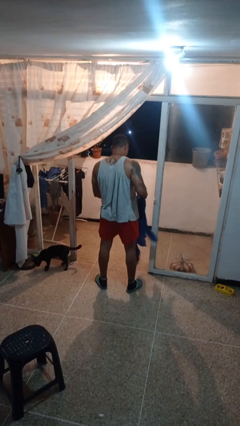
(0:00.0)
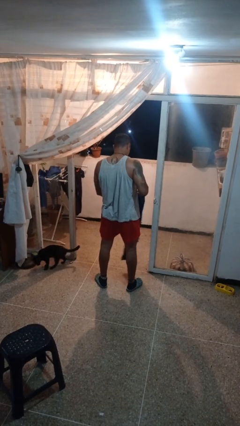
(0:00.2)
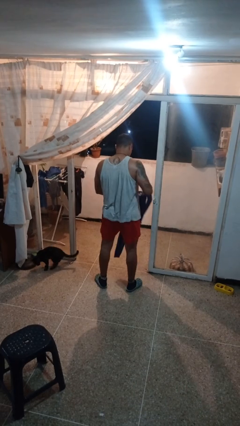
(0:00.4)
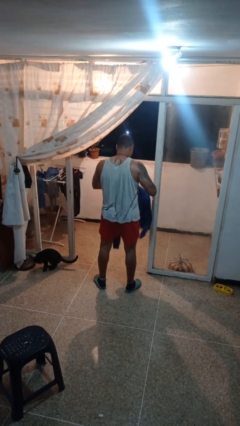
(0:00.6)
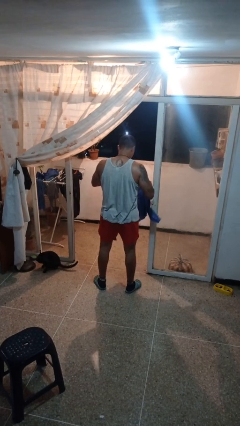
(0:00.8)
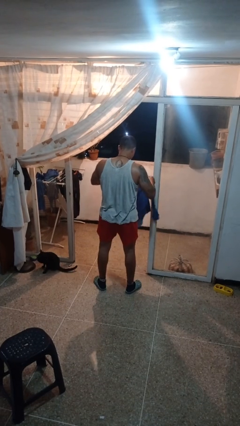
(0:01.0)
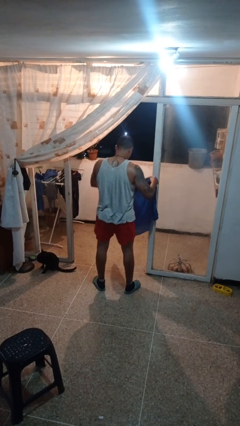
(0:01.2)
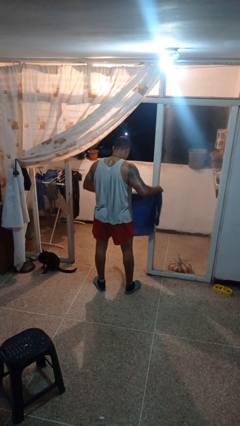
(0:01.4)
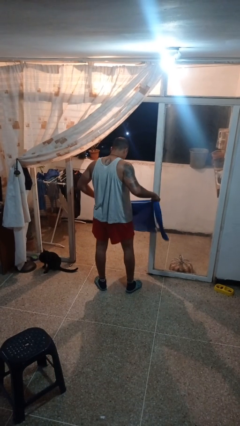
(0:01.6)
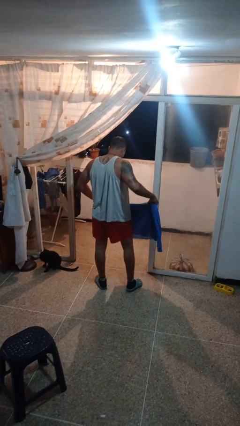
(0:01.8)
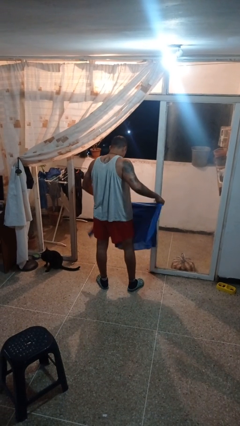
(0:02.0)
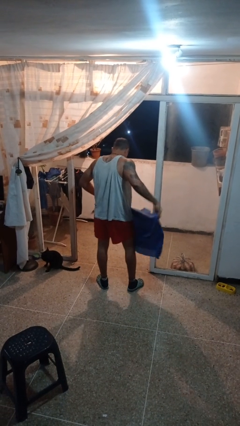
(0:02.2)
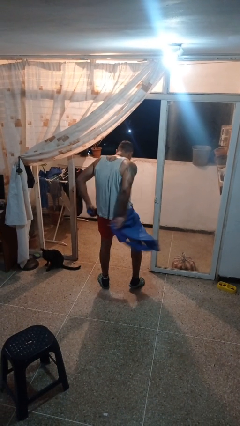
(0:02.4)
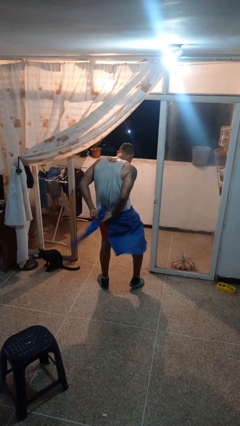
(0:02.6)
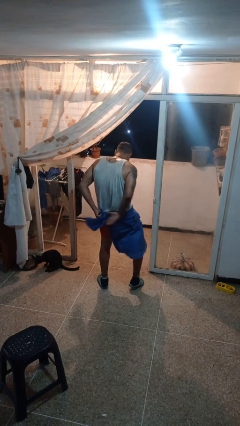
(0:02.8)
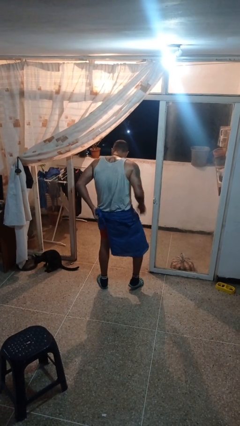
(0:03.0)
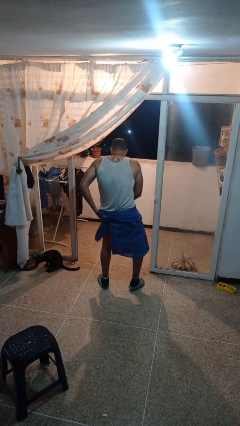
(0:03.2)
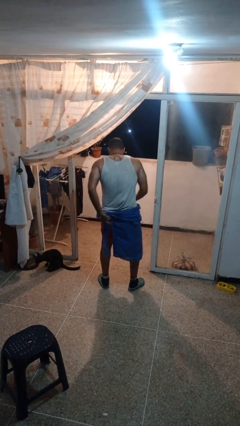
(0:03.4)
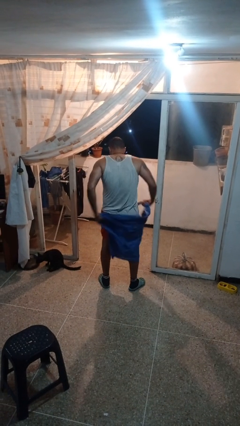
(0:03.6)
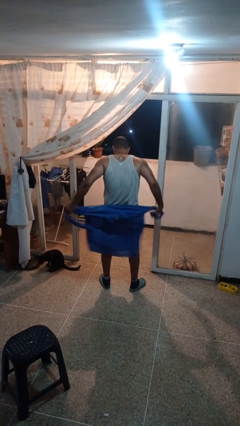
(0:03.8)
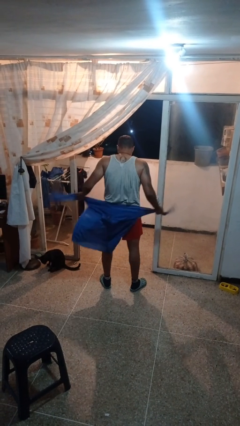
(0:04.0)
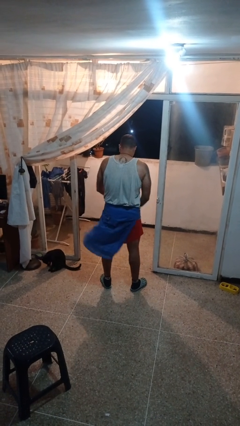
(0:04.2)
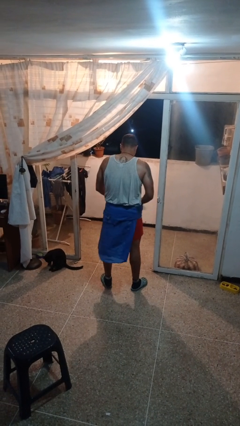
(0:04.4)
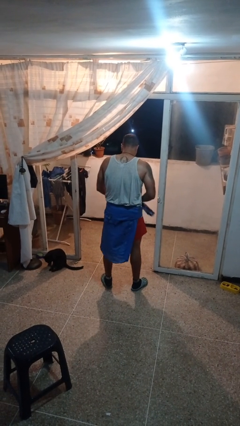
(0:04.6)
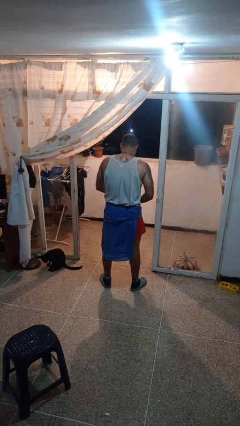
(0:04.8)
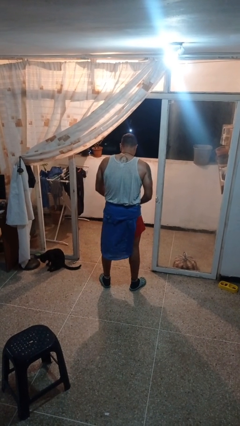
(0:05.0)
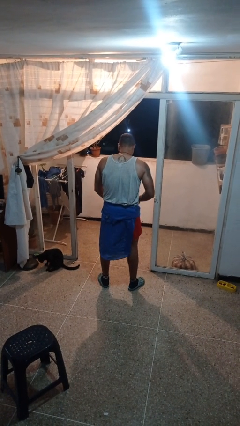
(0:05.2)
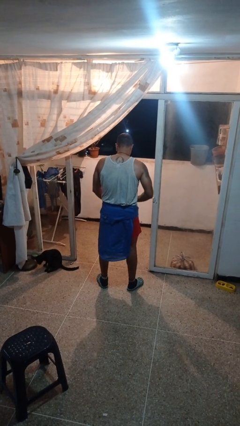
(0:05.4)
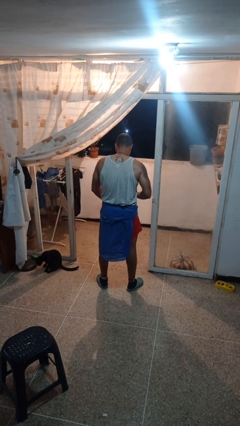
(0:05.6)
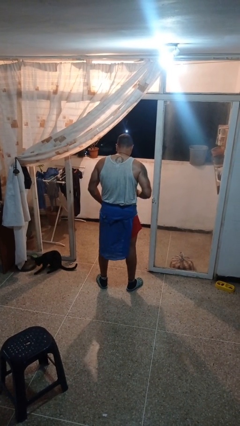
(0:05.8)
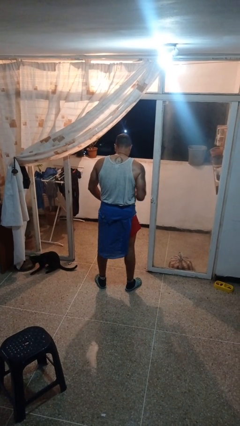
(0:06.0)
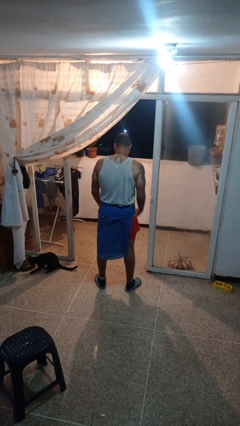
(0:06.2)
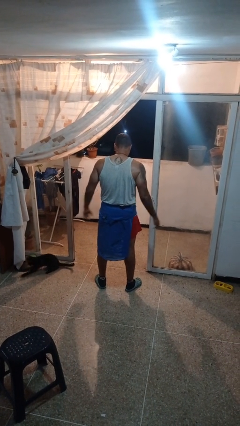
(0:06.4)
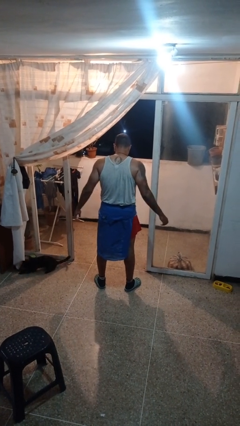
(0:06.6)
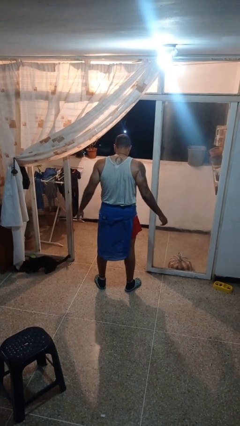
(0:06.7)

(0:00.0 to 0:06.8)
person ties jacket around waist

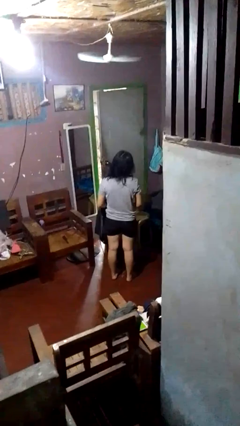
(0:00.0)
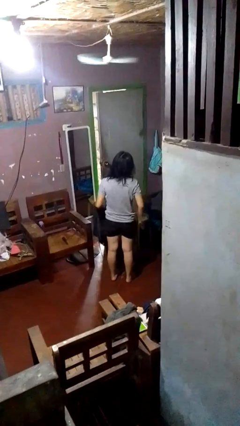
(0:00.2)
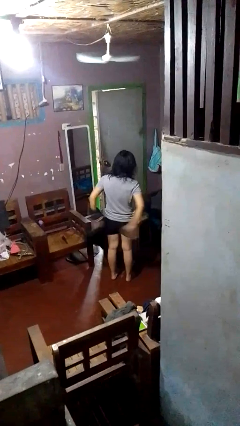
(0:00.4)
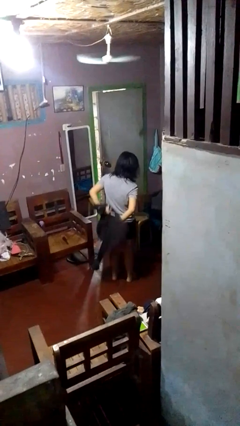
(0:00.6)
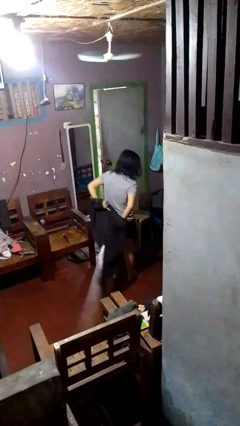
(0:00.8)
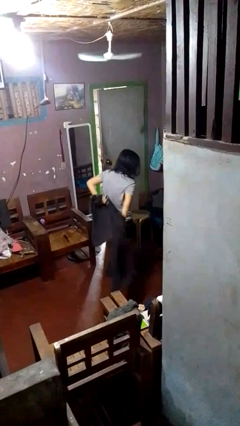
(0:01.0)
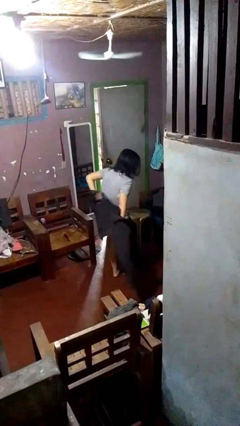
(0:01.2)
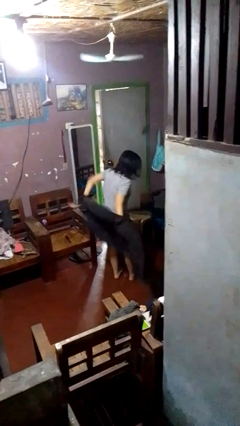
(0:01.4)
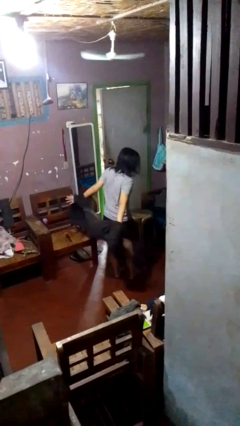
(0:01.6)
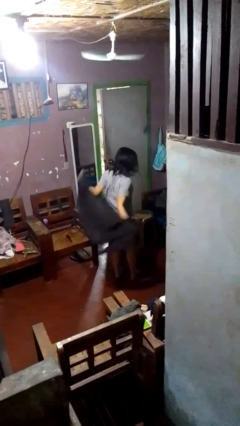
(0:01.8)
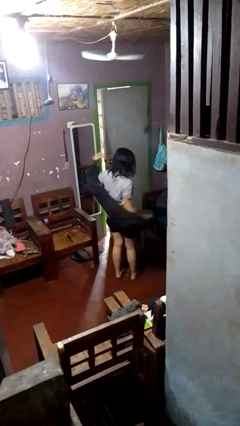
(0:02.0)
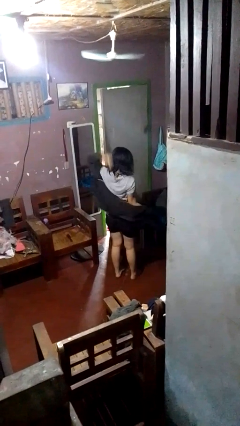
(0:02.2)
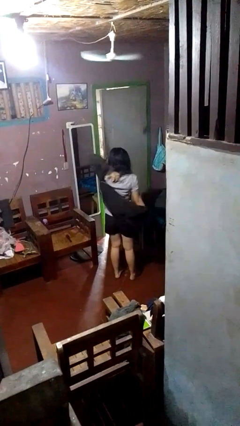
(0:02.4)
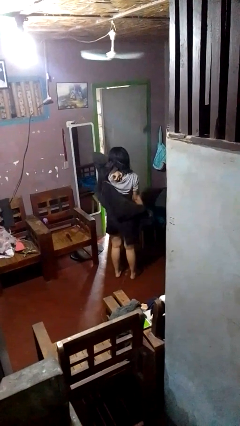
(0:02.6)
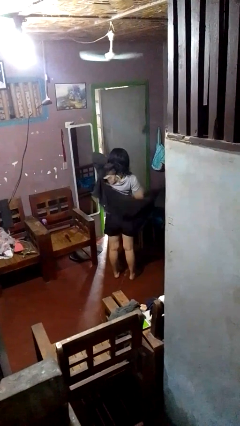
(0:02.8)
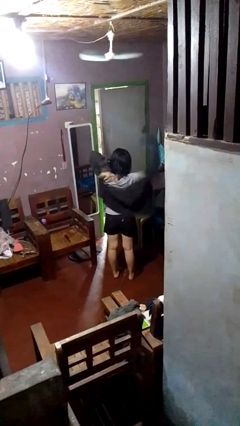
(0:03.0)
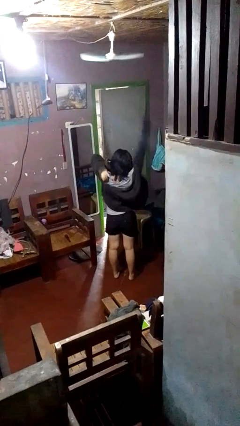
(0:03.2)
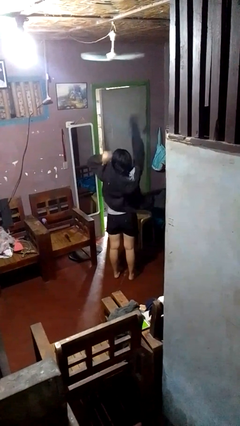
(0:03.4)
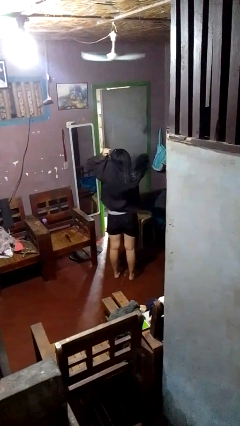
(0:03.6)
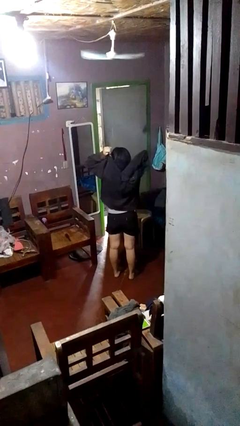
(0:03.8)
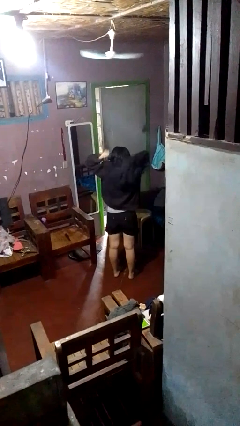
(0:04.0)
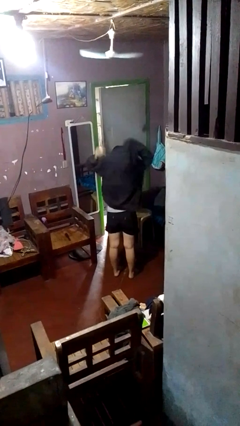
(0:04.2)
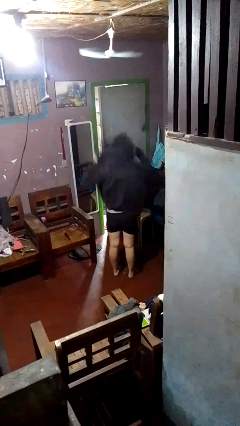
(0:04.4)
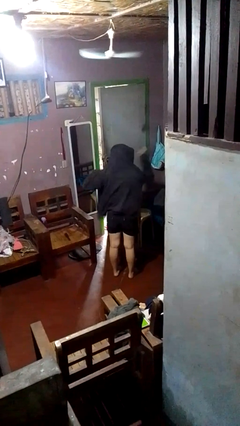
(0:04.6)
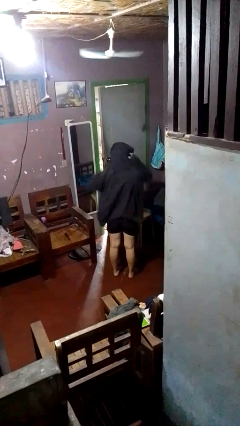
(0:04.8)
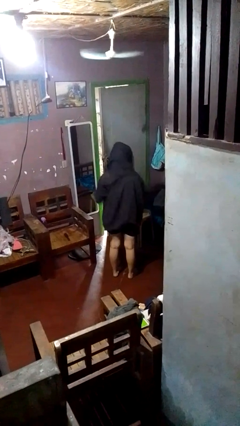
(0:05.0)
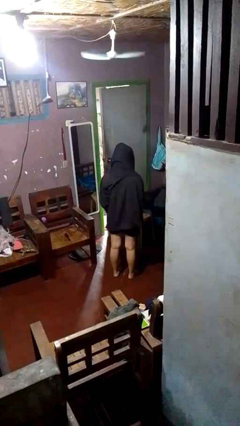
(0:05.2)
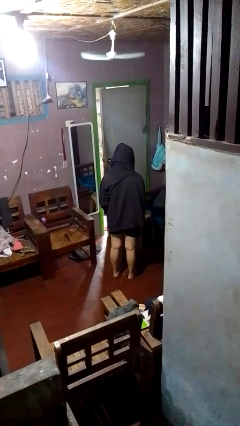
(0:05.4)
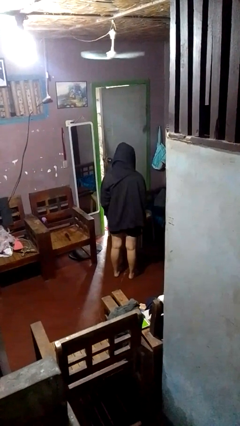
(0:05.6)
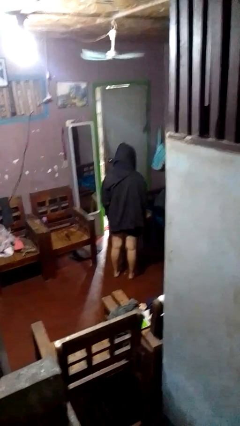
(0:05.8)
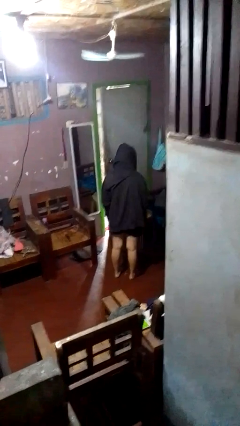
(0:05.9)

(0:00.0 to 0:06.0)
person puts on hoodie

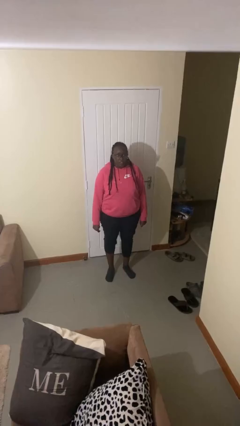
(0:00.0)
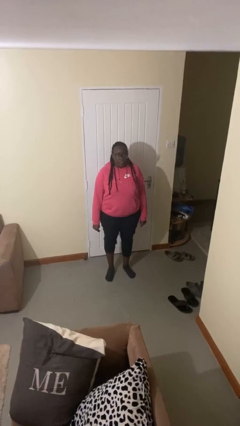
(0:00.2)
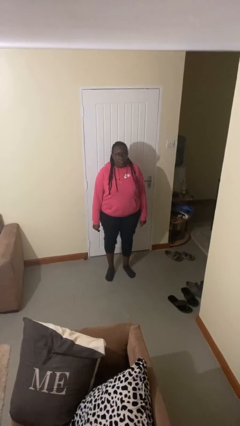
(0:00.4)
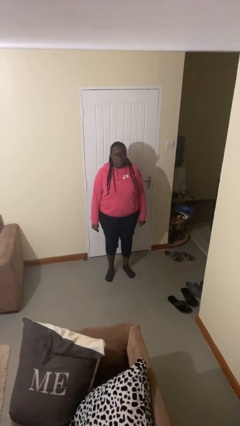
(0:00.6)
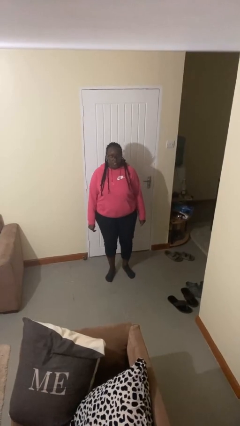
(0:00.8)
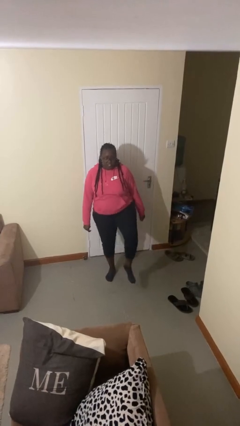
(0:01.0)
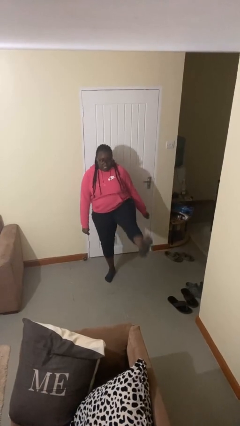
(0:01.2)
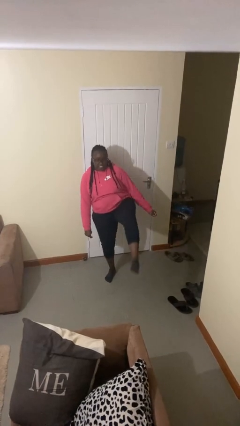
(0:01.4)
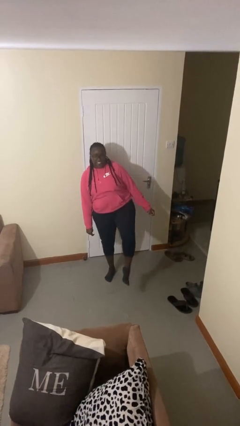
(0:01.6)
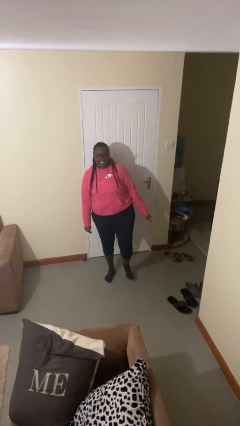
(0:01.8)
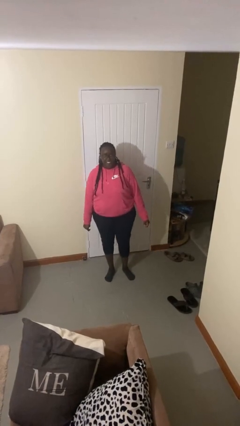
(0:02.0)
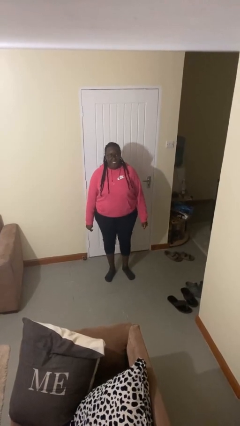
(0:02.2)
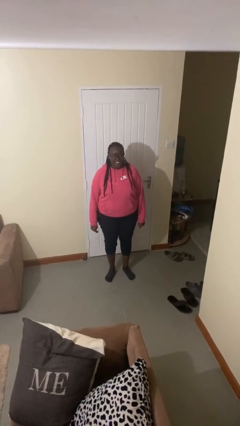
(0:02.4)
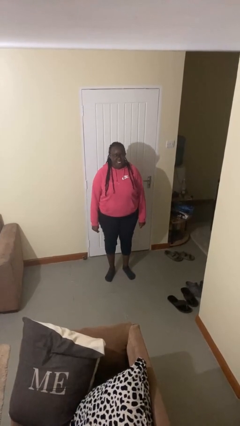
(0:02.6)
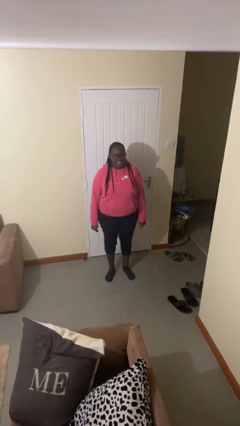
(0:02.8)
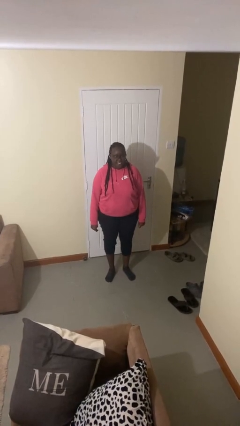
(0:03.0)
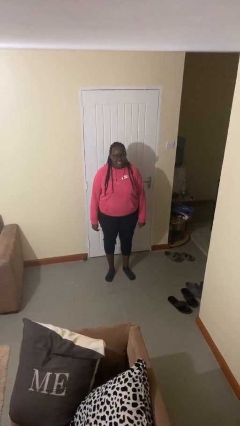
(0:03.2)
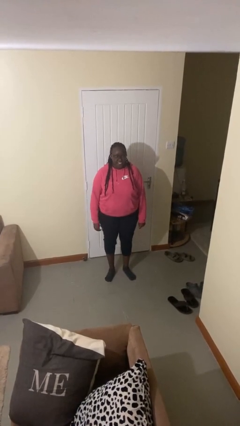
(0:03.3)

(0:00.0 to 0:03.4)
person karate kicks

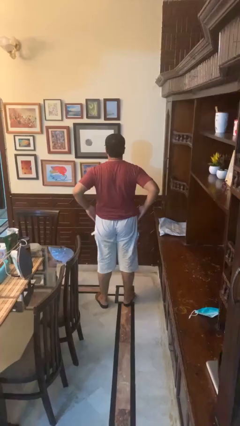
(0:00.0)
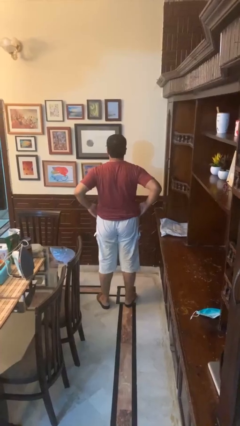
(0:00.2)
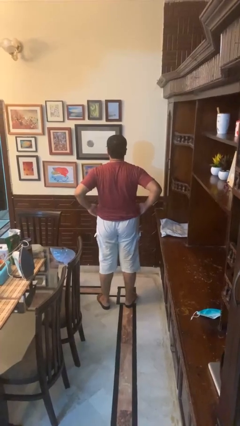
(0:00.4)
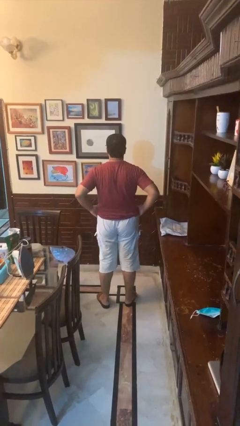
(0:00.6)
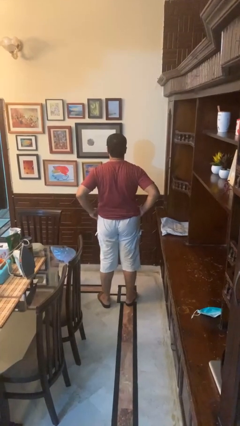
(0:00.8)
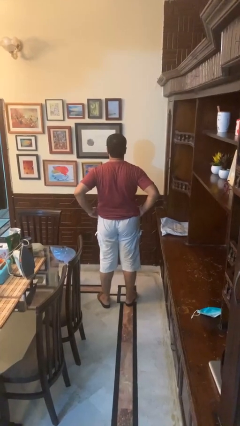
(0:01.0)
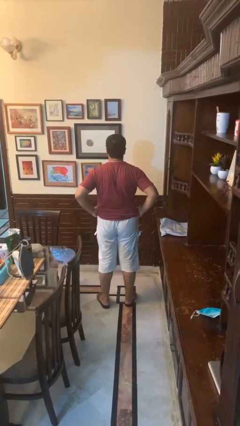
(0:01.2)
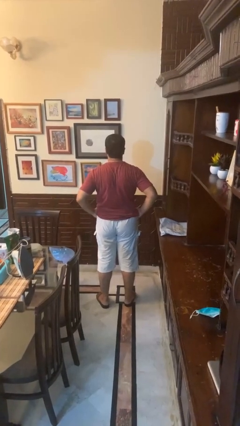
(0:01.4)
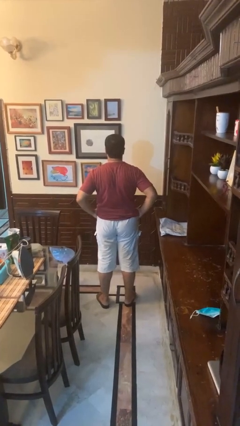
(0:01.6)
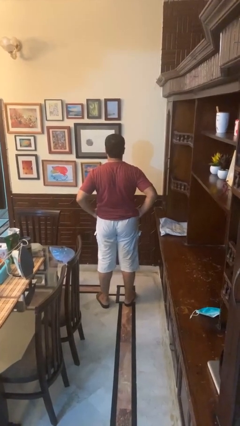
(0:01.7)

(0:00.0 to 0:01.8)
person puts hands in back pockets
